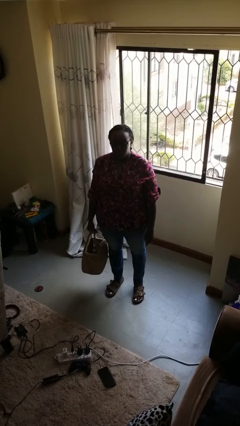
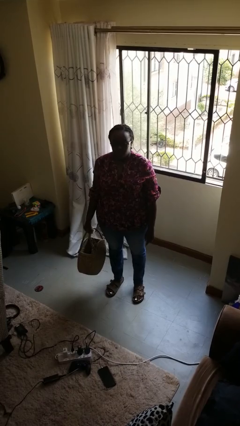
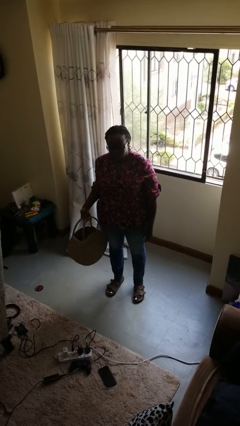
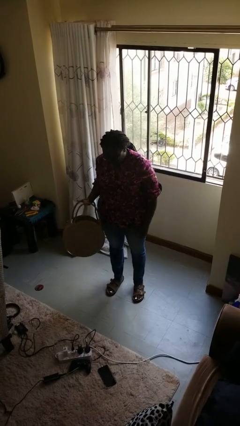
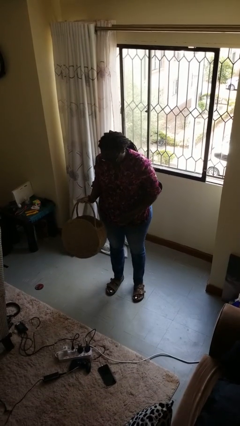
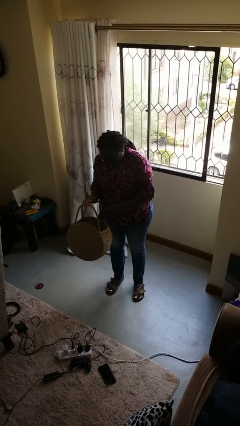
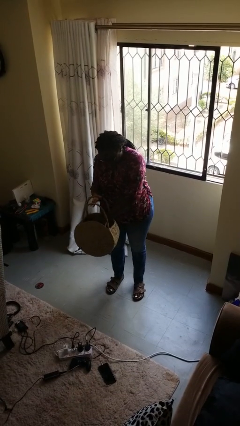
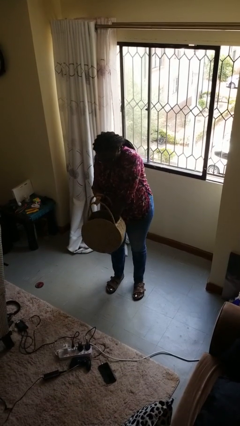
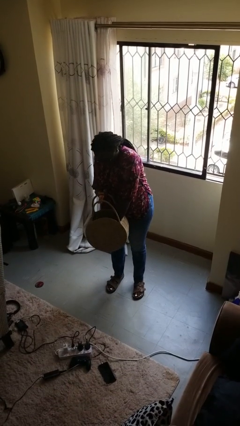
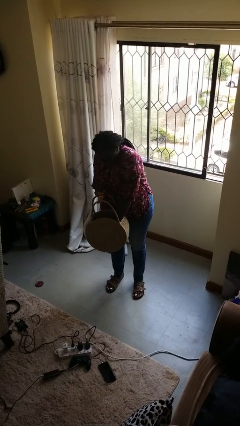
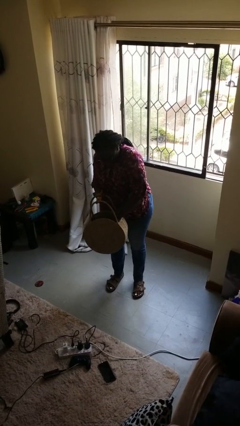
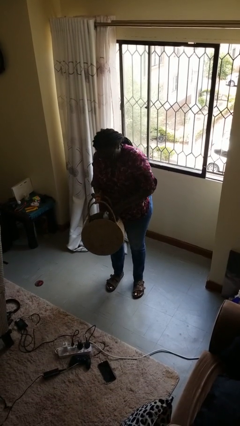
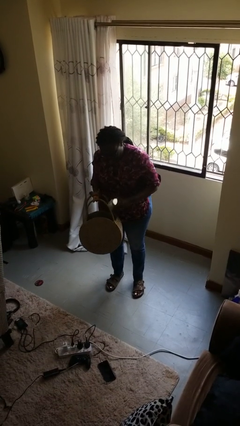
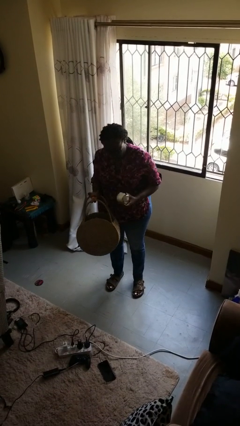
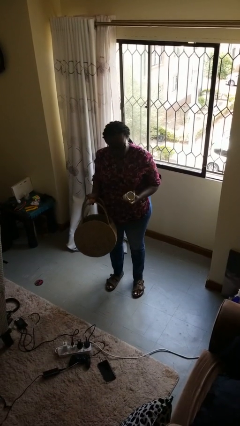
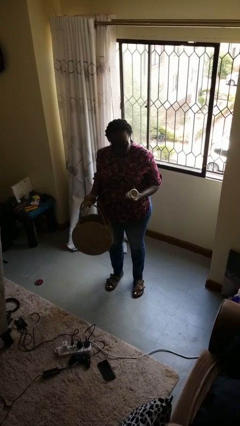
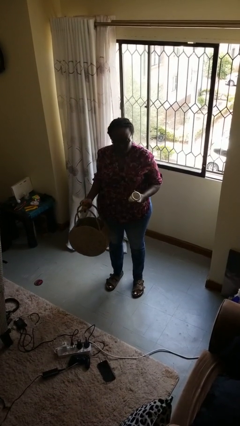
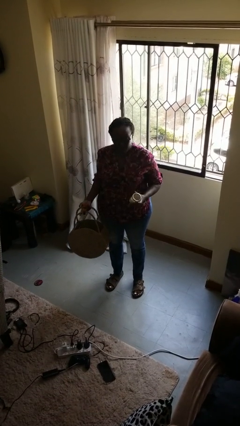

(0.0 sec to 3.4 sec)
person takes object from basket

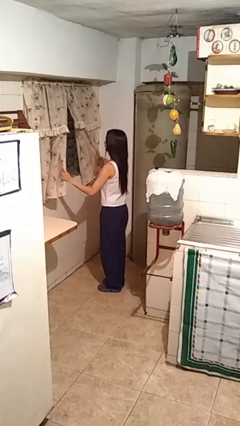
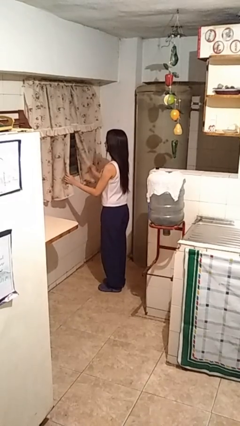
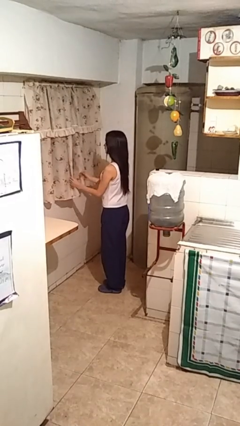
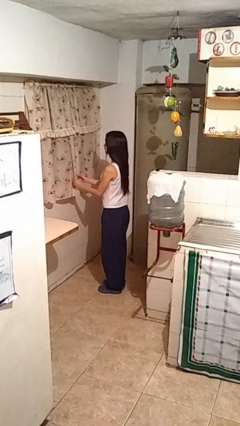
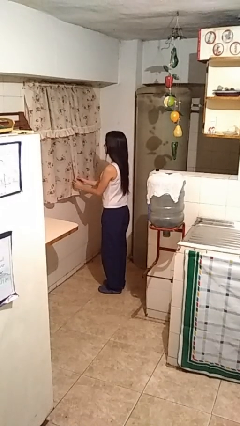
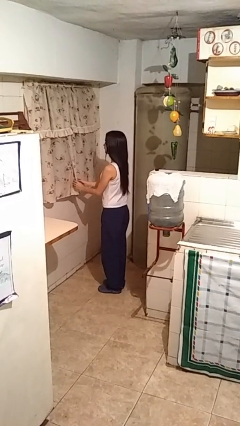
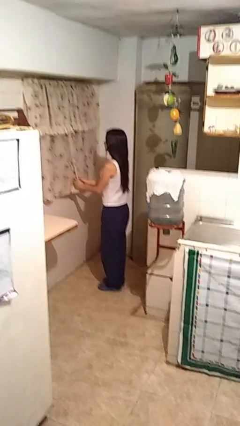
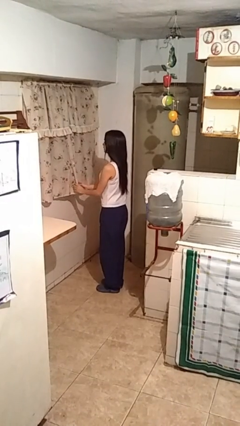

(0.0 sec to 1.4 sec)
person closes curtains

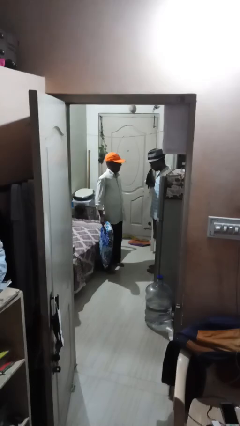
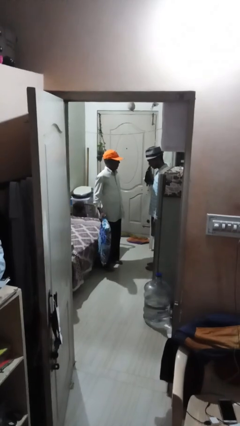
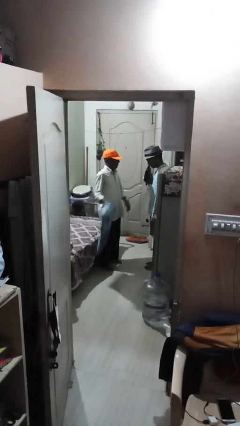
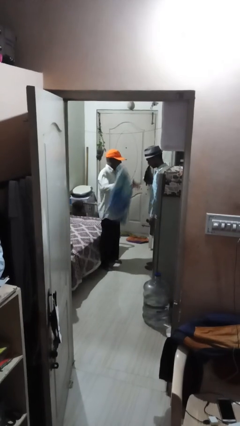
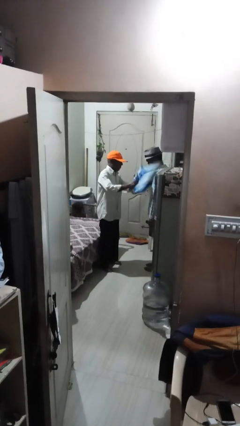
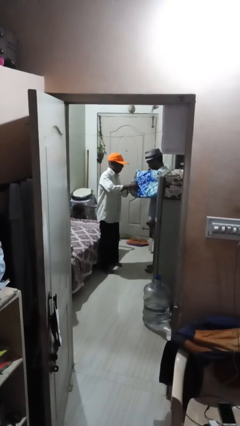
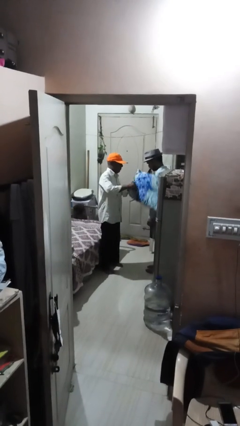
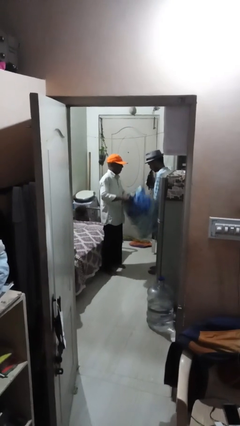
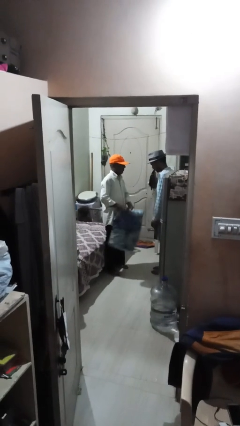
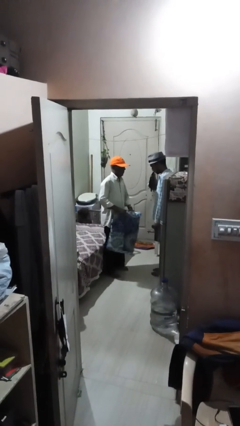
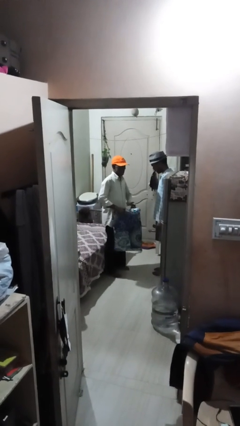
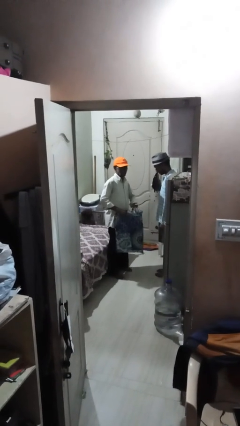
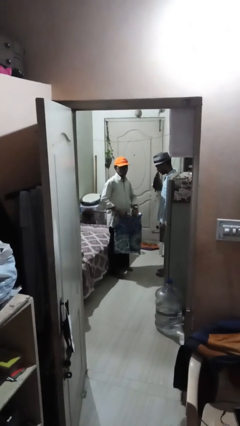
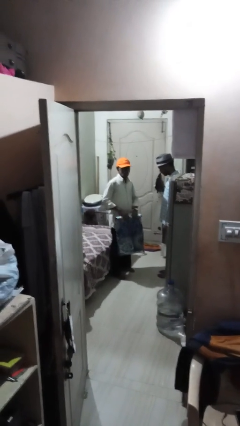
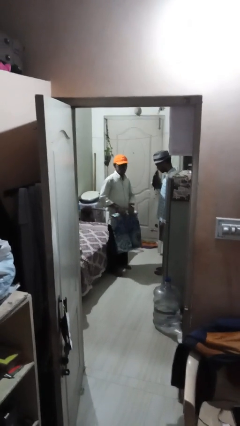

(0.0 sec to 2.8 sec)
person hits person with pillow

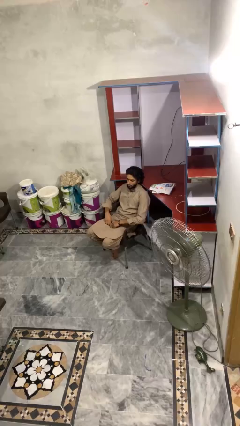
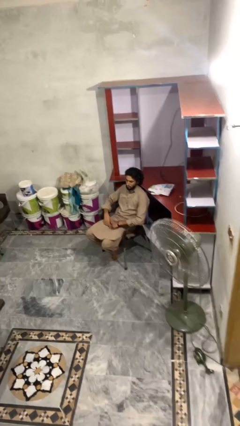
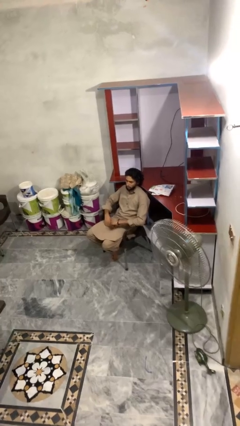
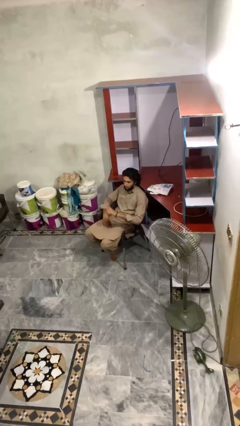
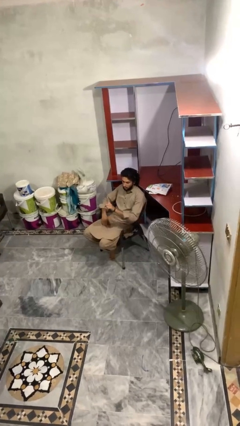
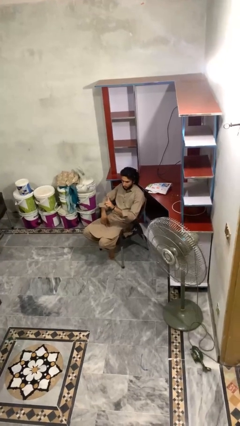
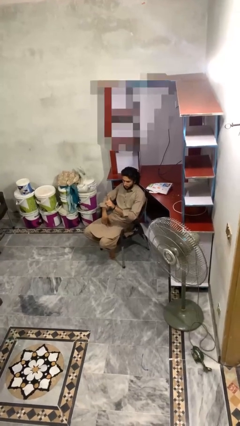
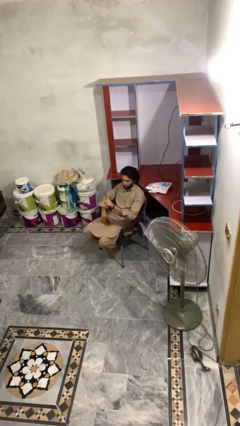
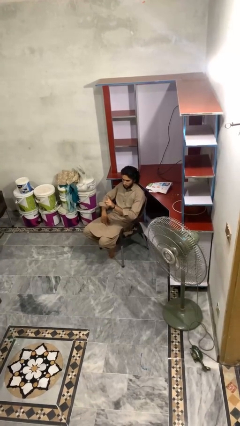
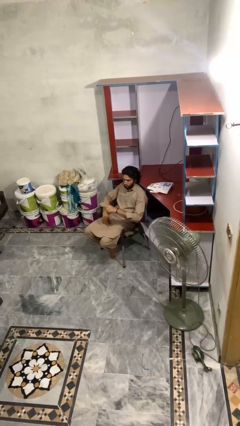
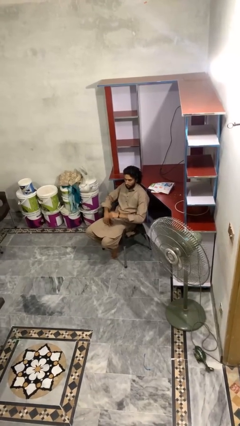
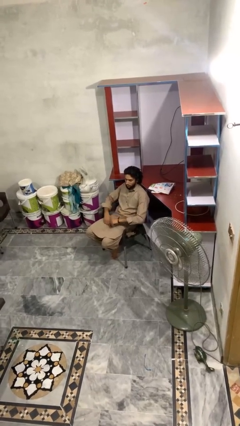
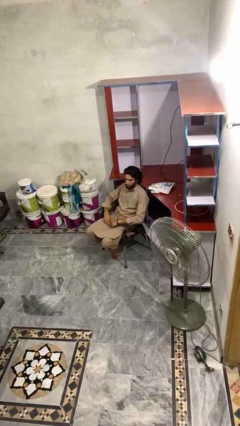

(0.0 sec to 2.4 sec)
person gestures number one

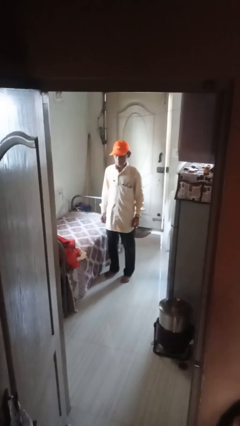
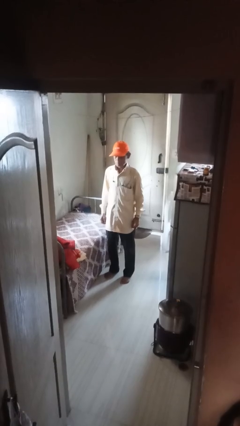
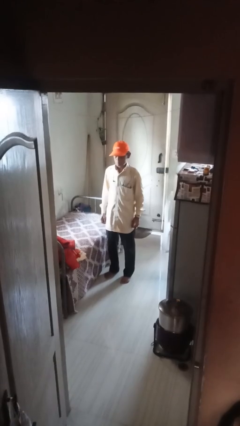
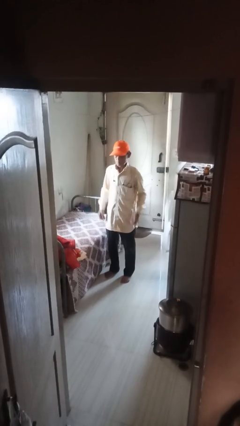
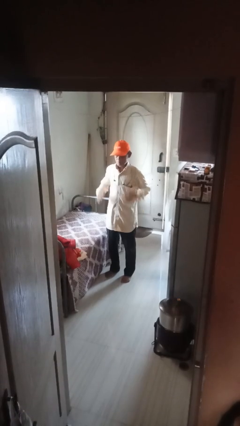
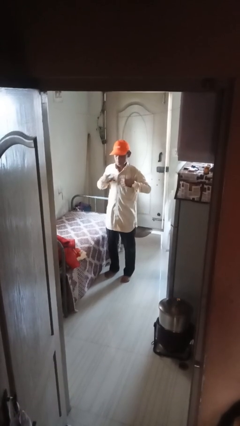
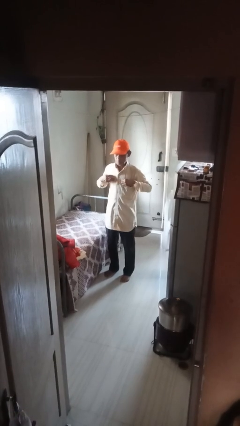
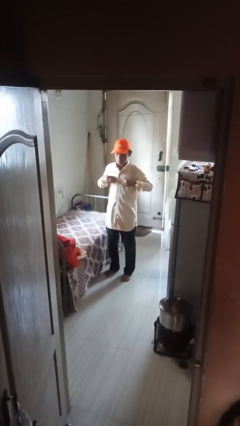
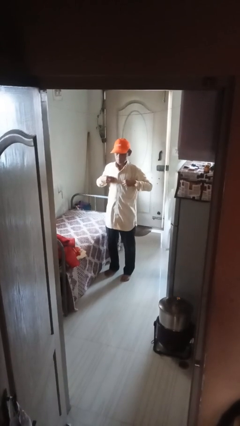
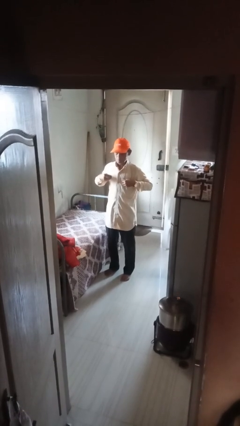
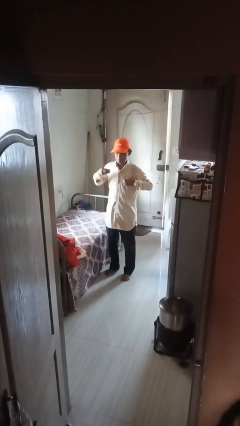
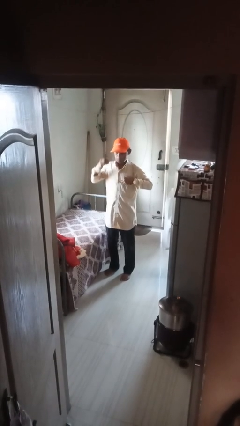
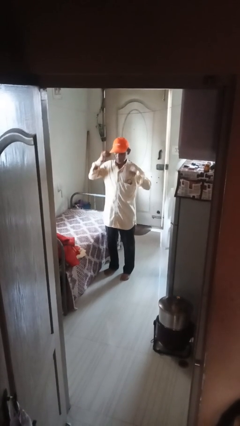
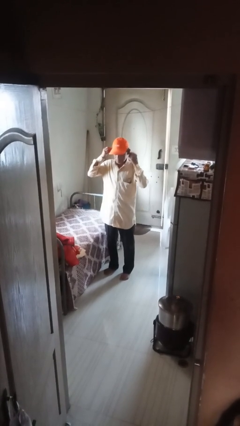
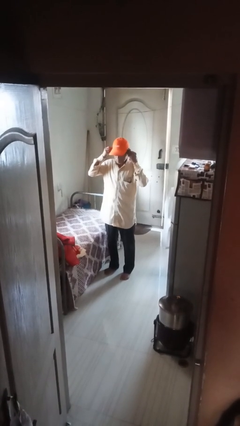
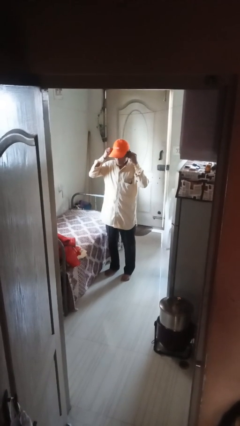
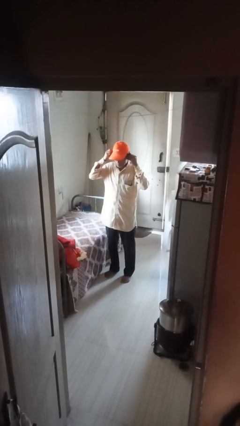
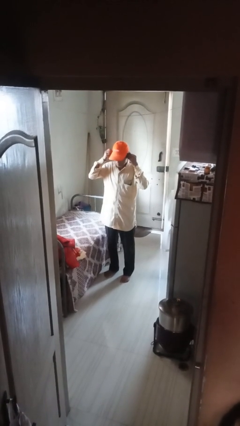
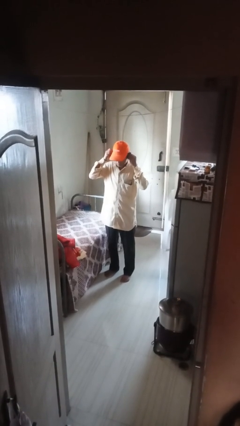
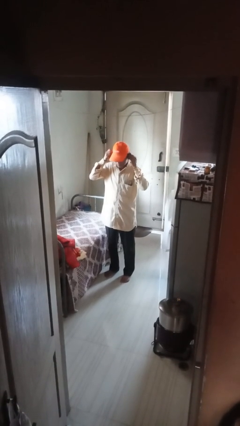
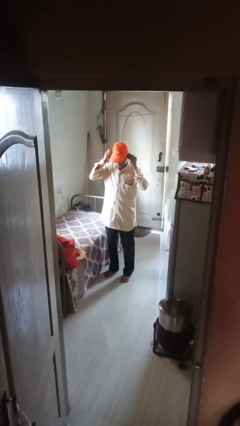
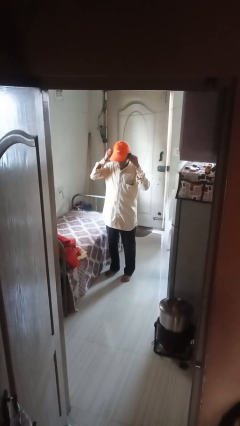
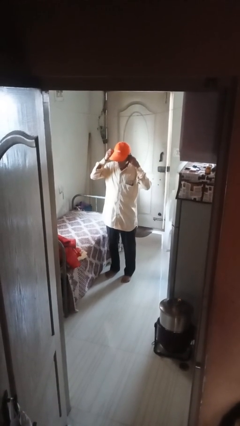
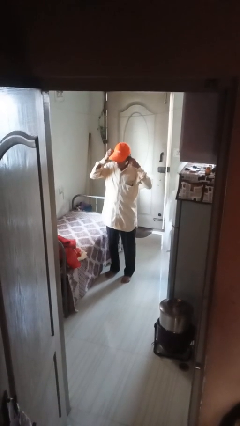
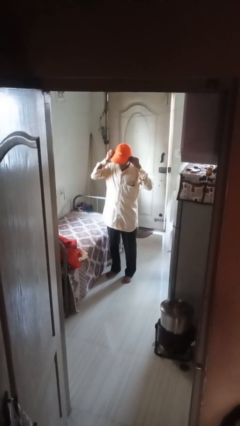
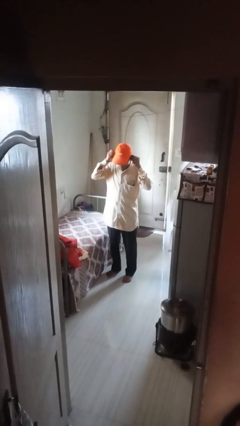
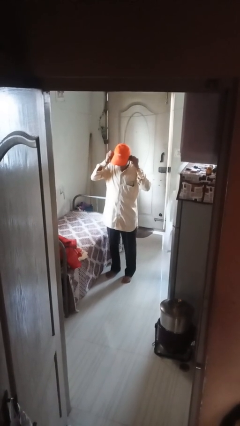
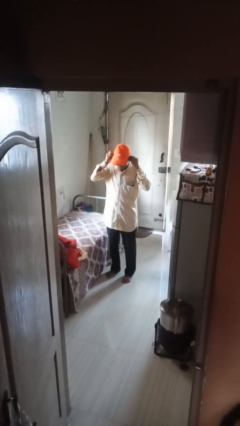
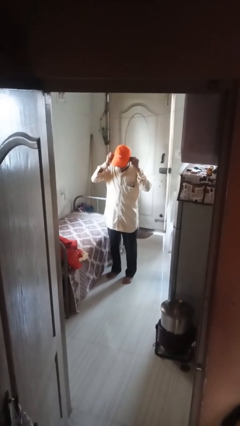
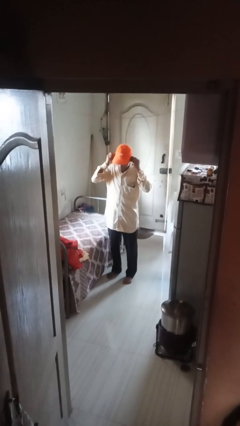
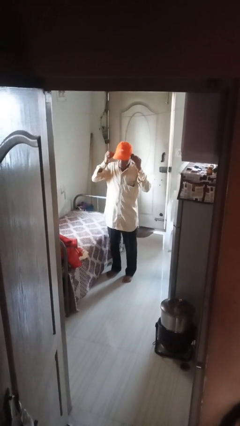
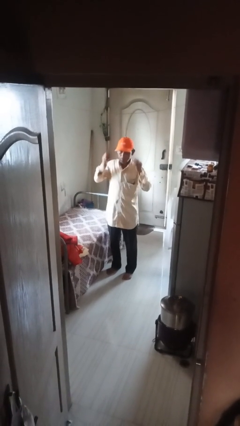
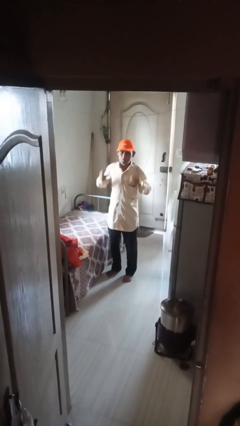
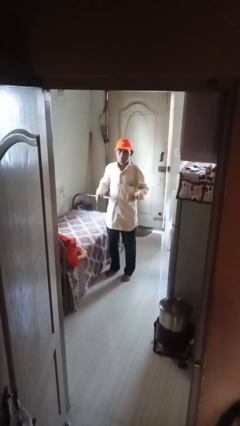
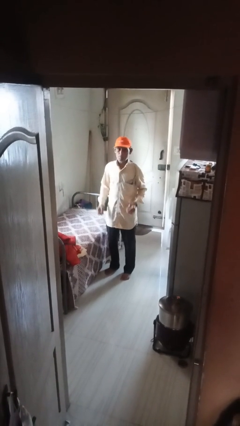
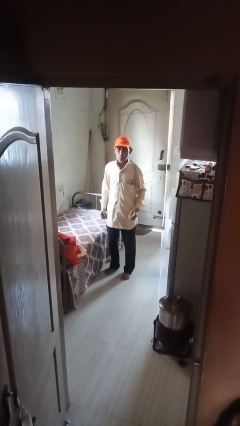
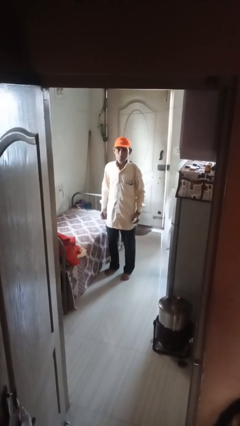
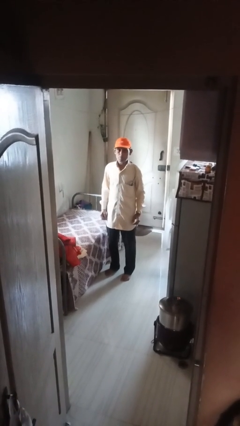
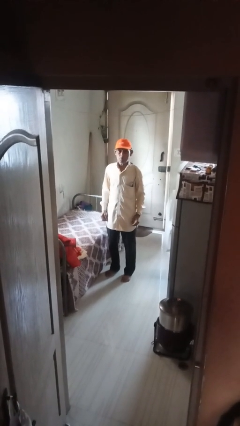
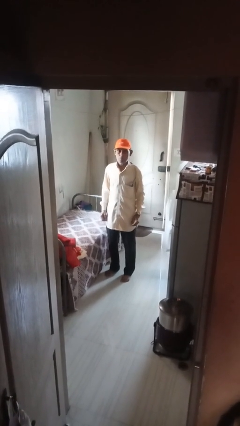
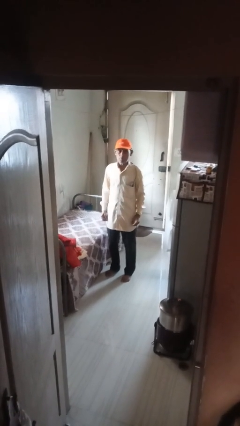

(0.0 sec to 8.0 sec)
person puts on headphones
